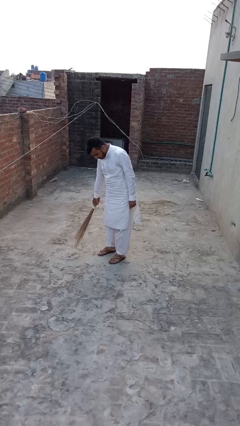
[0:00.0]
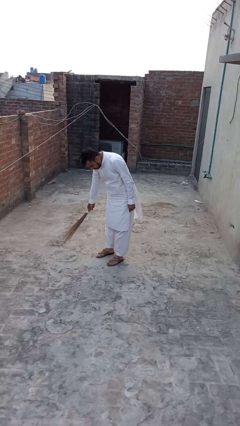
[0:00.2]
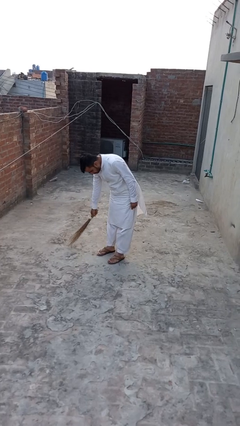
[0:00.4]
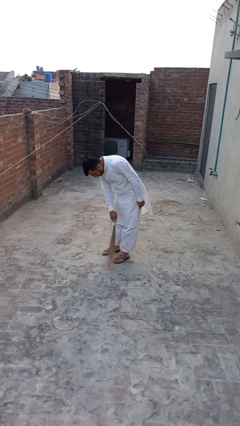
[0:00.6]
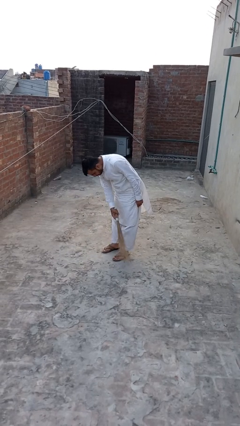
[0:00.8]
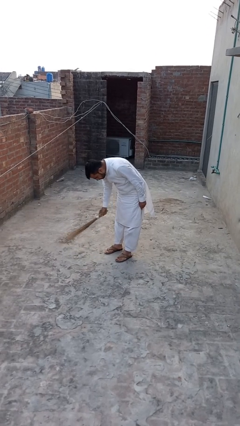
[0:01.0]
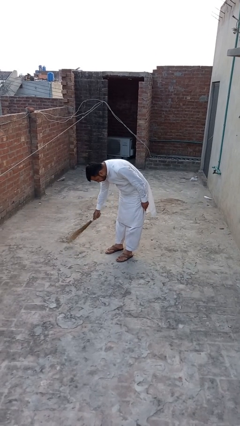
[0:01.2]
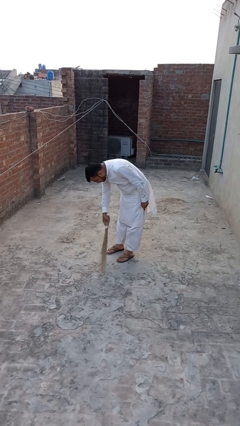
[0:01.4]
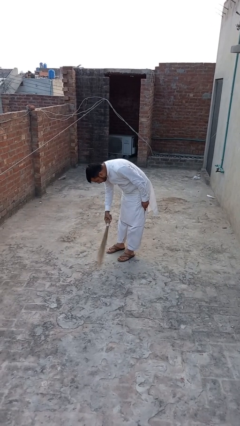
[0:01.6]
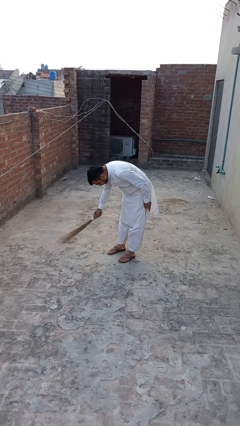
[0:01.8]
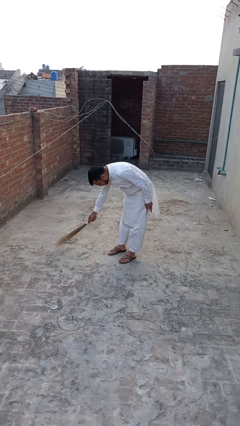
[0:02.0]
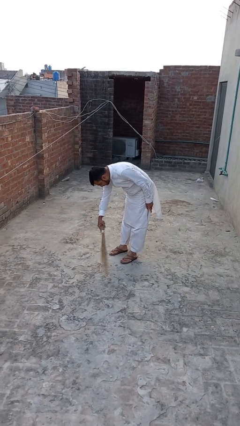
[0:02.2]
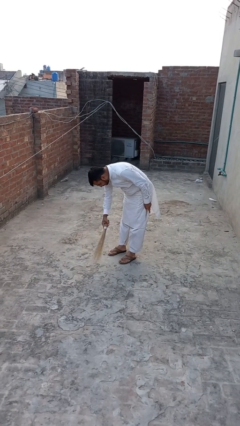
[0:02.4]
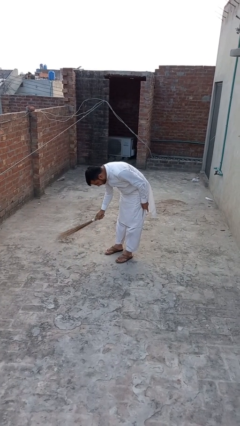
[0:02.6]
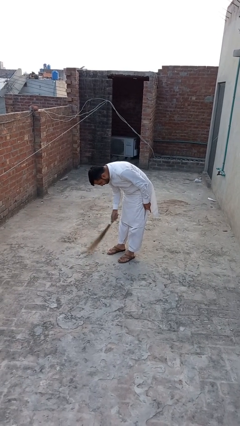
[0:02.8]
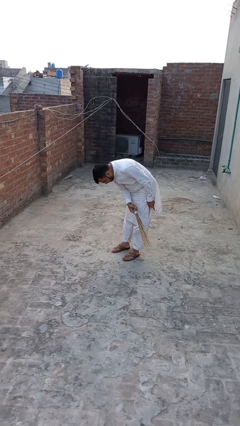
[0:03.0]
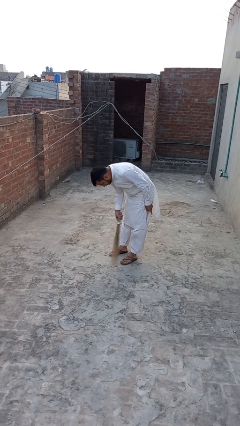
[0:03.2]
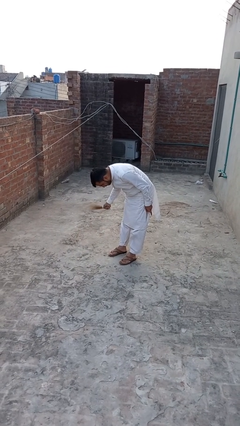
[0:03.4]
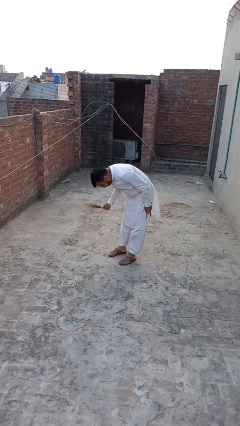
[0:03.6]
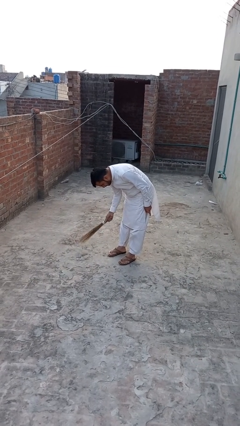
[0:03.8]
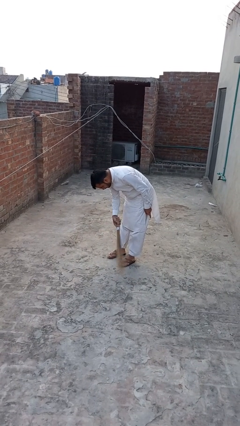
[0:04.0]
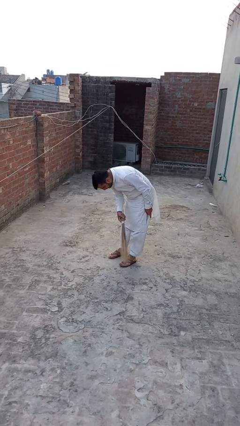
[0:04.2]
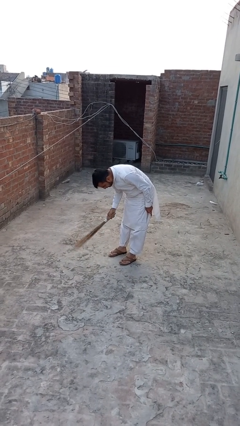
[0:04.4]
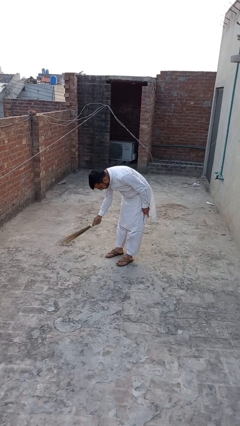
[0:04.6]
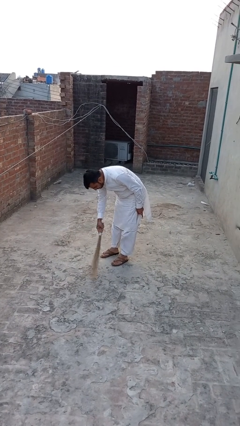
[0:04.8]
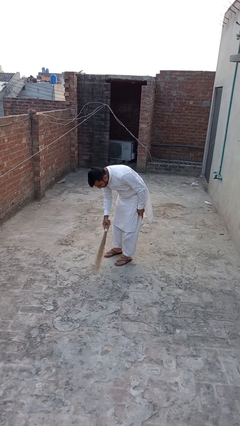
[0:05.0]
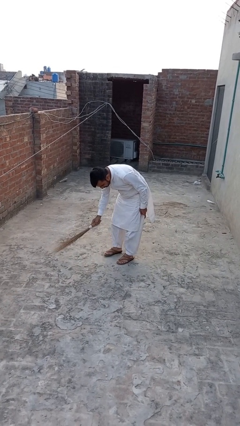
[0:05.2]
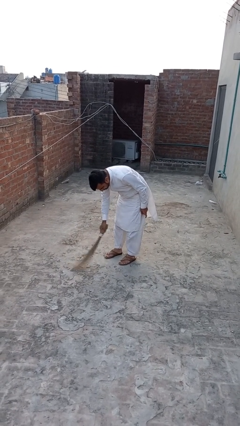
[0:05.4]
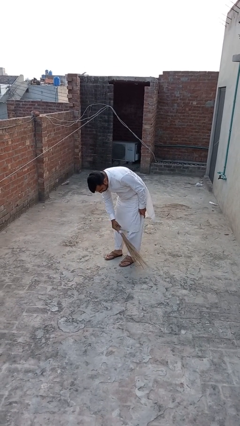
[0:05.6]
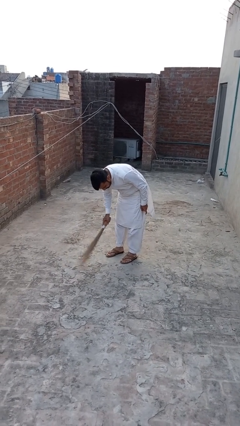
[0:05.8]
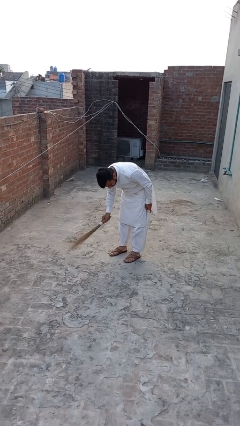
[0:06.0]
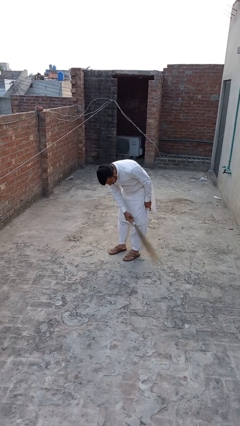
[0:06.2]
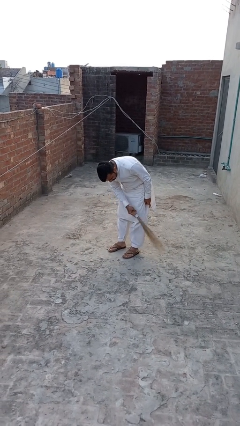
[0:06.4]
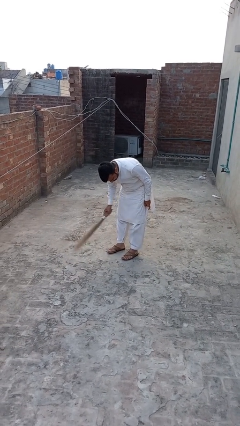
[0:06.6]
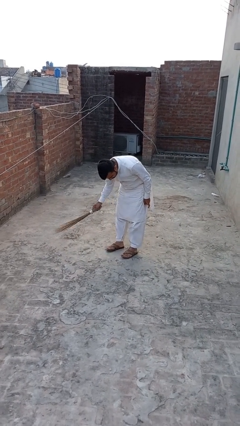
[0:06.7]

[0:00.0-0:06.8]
person sweeps floor

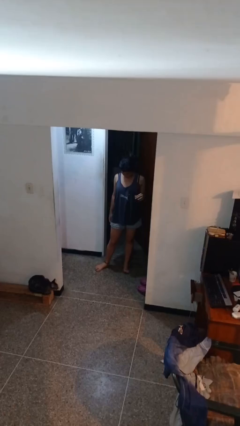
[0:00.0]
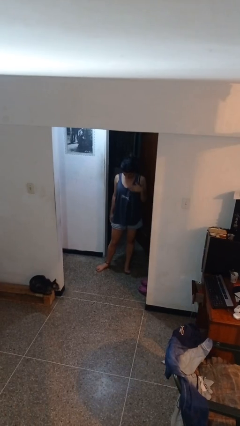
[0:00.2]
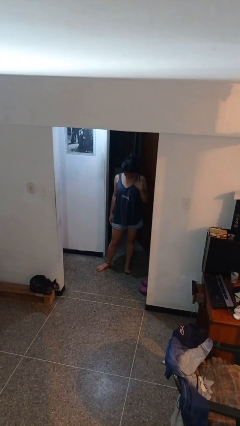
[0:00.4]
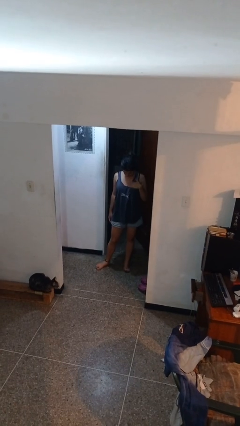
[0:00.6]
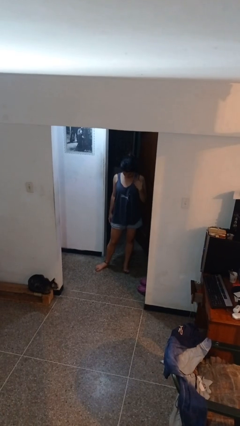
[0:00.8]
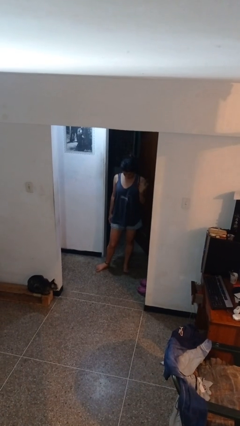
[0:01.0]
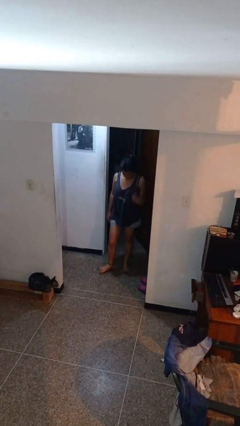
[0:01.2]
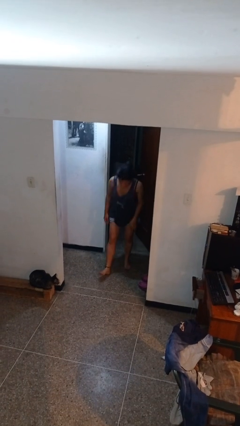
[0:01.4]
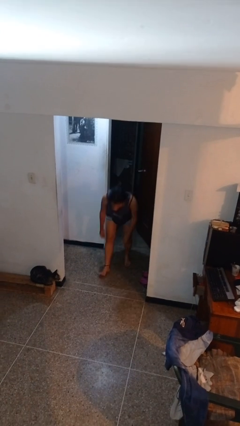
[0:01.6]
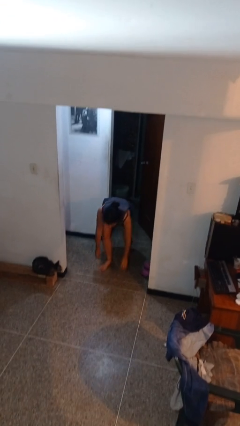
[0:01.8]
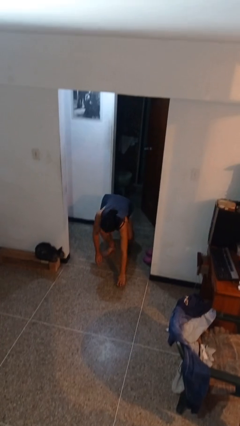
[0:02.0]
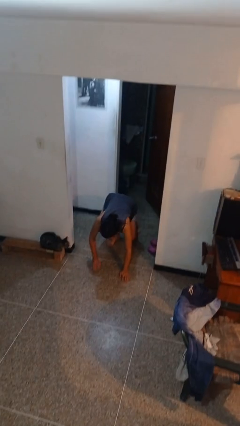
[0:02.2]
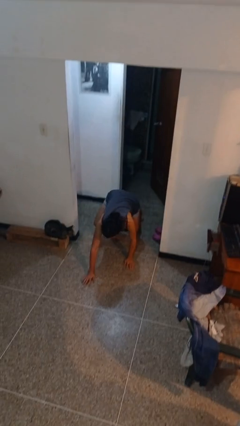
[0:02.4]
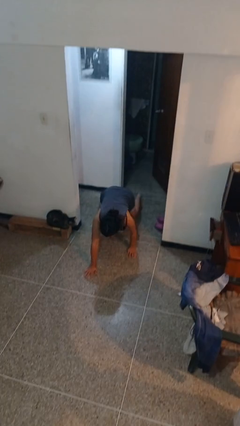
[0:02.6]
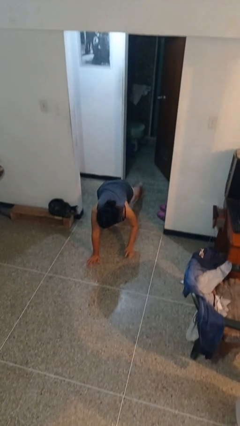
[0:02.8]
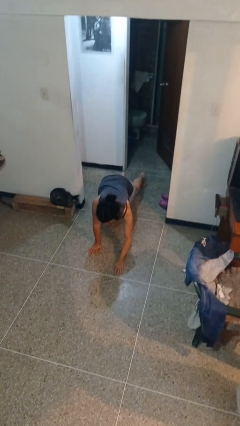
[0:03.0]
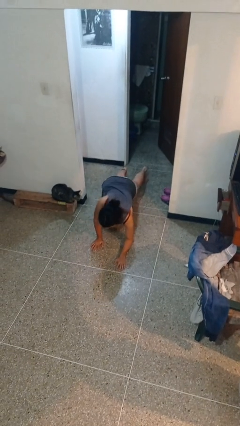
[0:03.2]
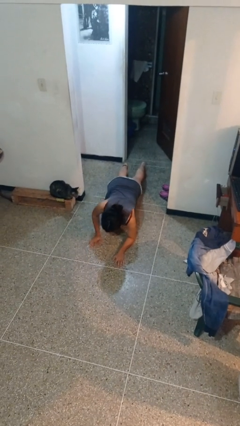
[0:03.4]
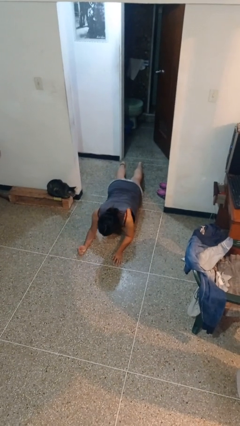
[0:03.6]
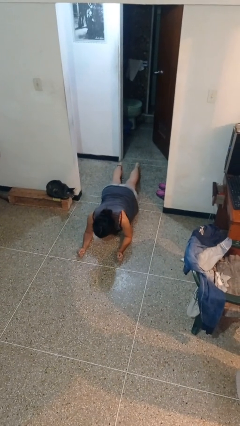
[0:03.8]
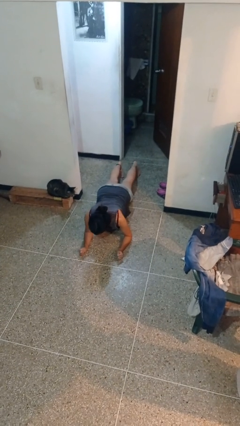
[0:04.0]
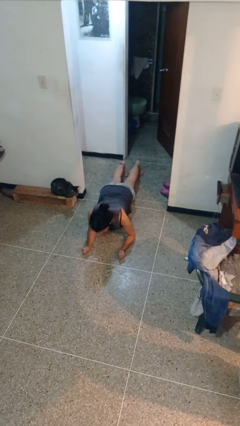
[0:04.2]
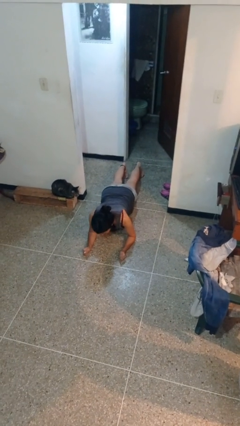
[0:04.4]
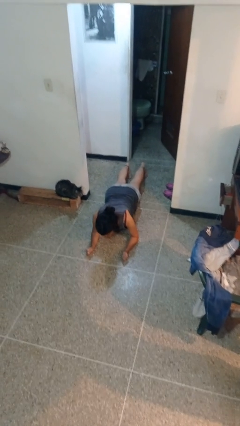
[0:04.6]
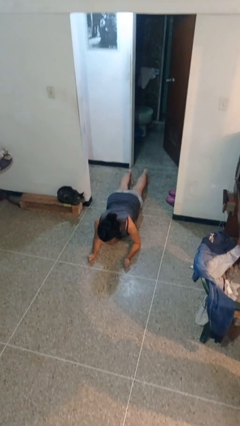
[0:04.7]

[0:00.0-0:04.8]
person exercises with plank

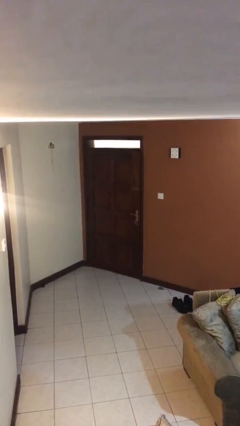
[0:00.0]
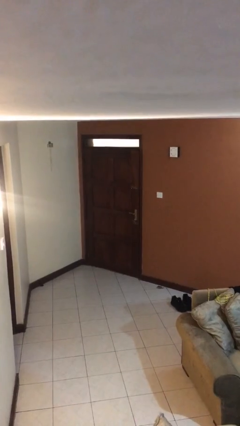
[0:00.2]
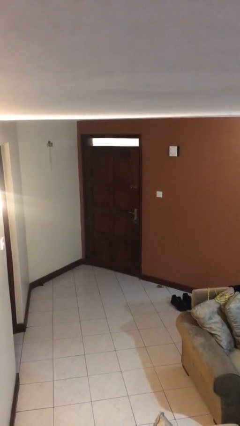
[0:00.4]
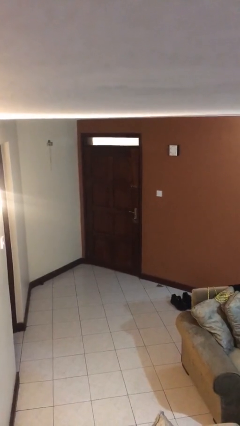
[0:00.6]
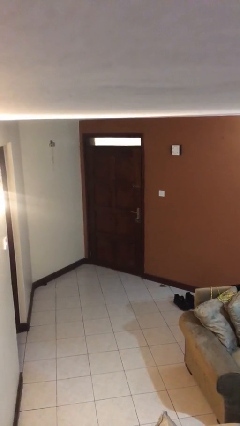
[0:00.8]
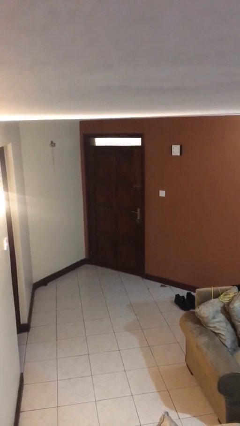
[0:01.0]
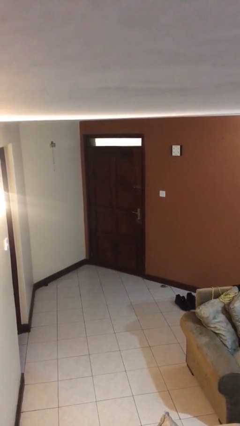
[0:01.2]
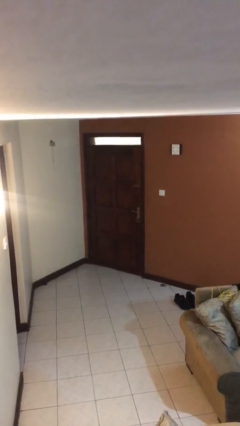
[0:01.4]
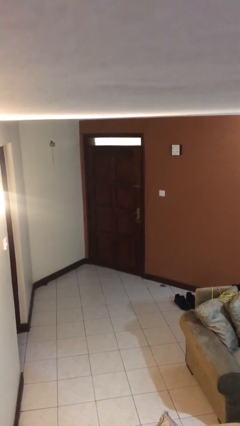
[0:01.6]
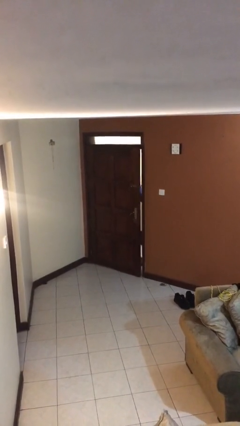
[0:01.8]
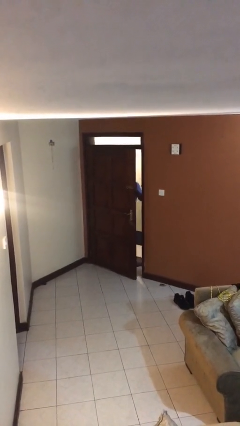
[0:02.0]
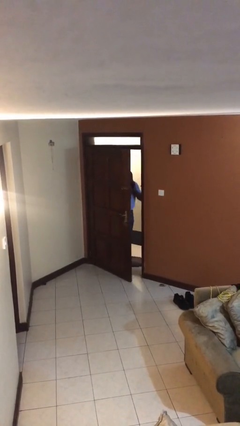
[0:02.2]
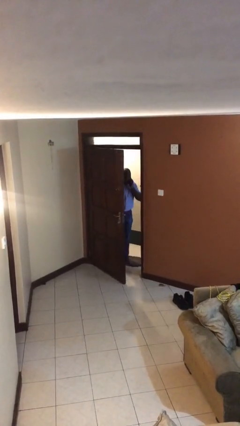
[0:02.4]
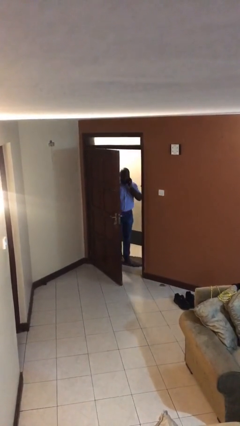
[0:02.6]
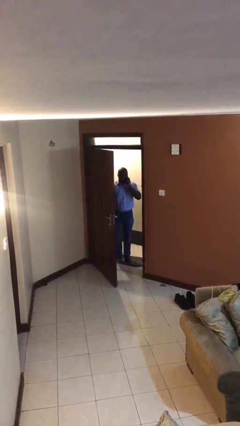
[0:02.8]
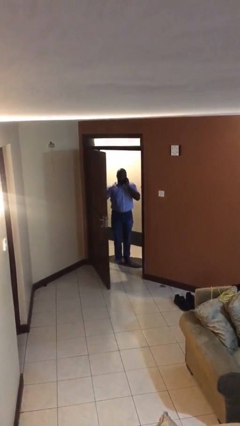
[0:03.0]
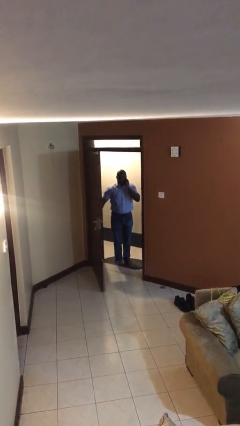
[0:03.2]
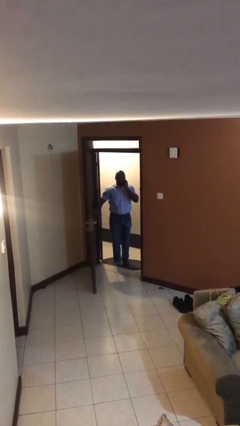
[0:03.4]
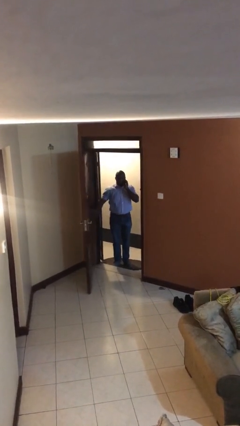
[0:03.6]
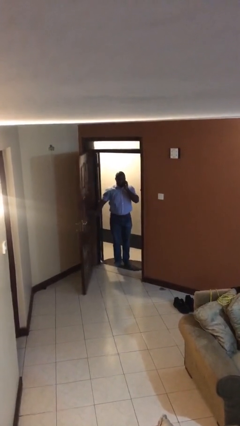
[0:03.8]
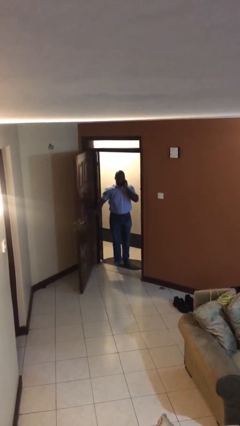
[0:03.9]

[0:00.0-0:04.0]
person opens facility door

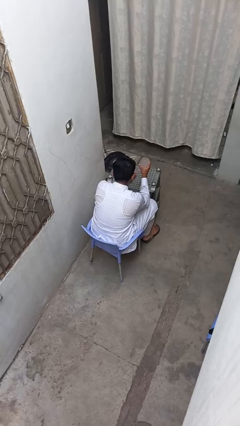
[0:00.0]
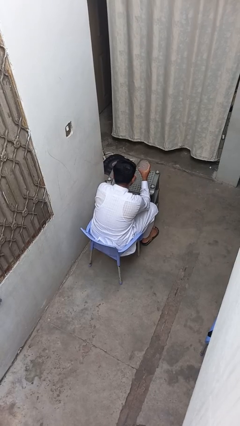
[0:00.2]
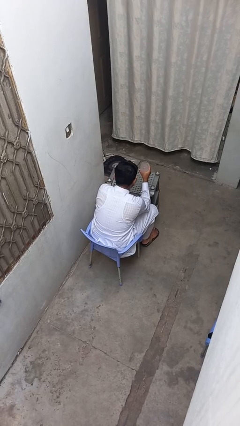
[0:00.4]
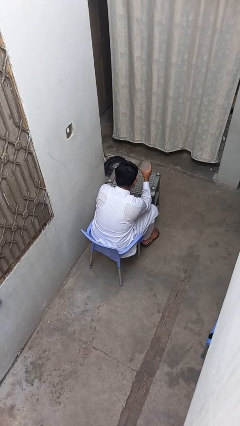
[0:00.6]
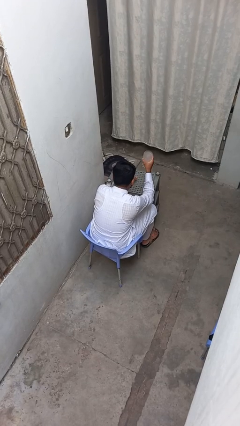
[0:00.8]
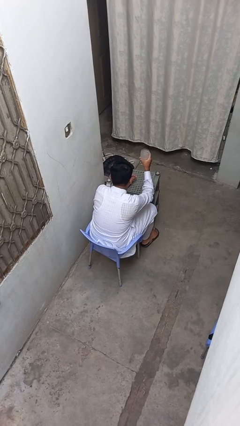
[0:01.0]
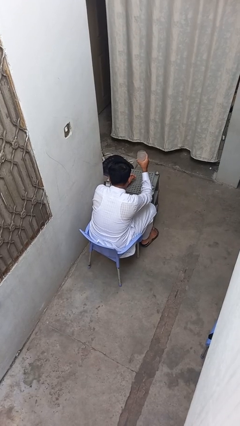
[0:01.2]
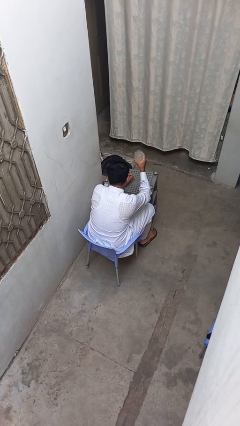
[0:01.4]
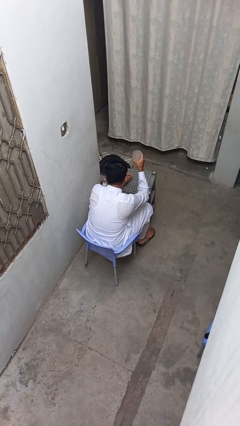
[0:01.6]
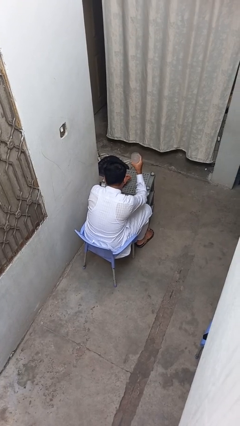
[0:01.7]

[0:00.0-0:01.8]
person picks up object from table

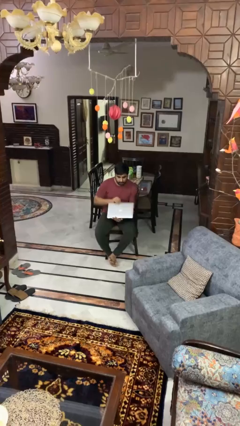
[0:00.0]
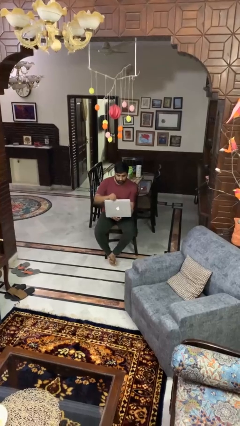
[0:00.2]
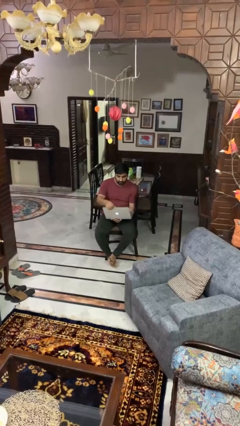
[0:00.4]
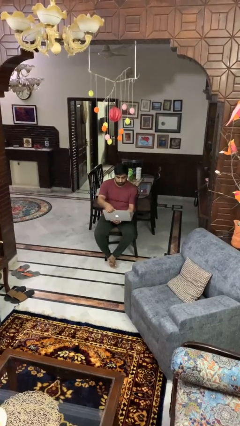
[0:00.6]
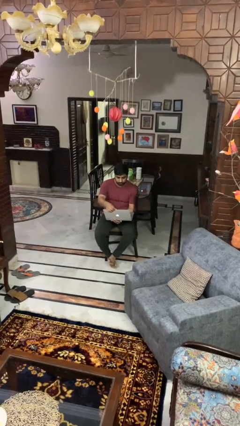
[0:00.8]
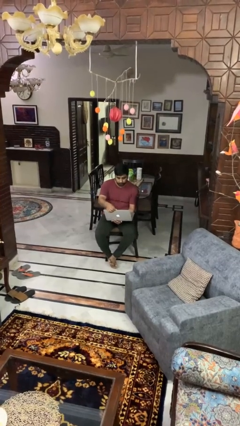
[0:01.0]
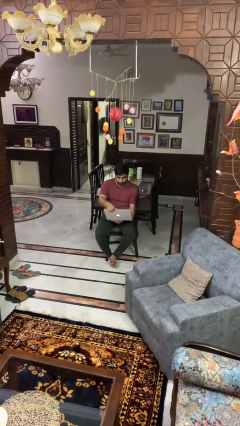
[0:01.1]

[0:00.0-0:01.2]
person opens laptop
